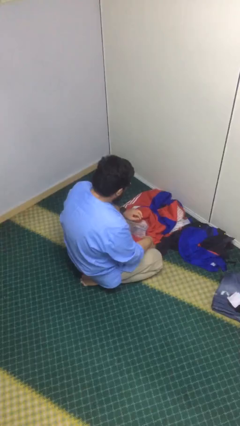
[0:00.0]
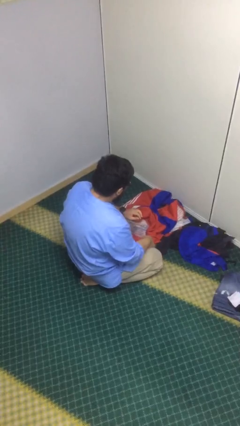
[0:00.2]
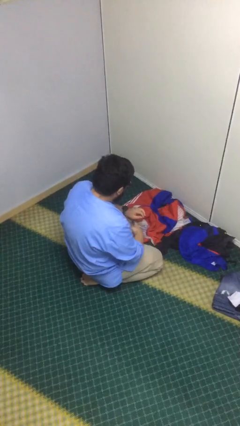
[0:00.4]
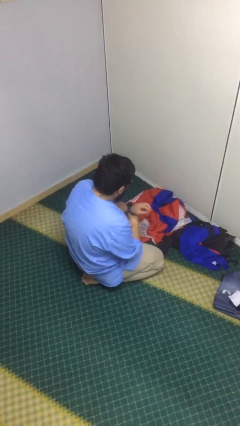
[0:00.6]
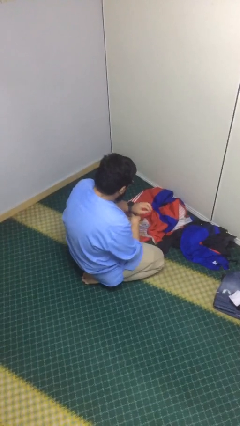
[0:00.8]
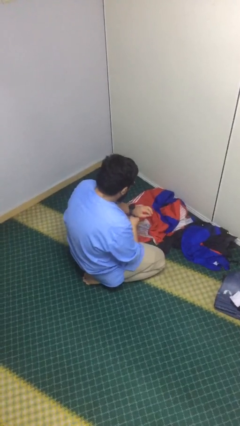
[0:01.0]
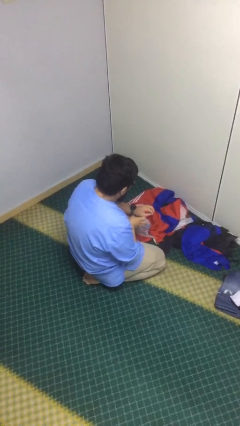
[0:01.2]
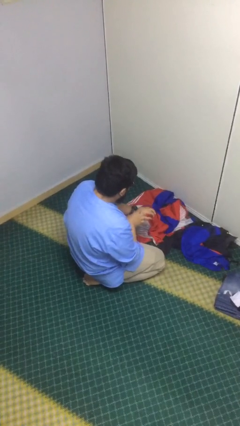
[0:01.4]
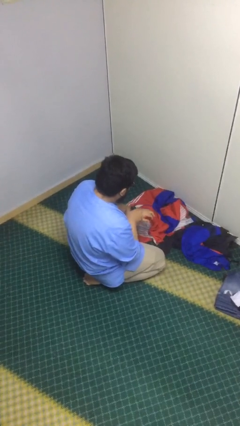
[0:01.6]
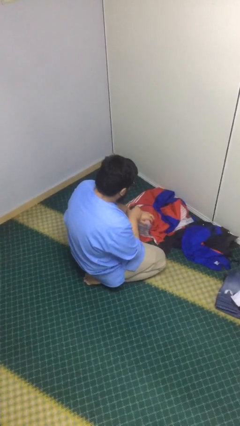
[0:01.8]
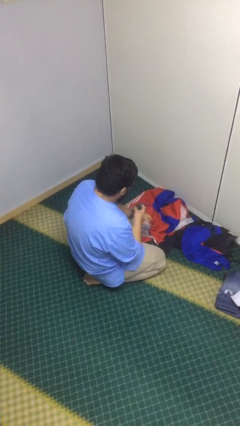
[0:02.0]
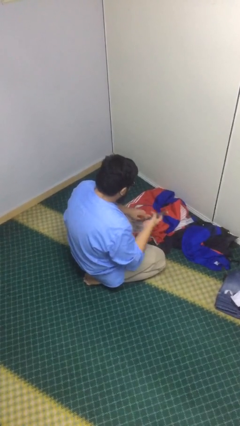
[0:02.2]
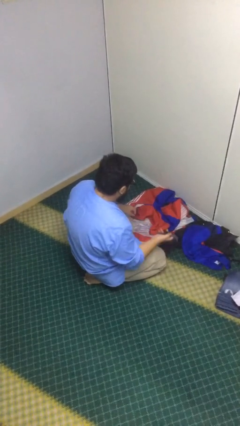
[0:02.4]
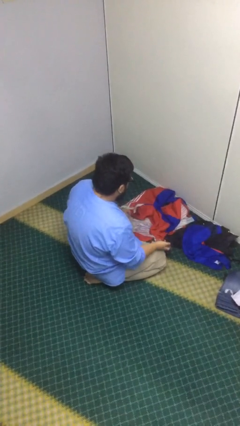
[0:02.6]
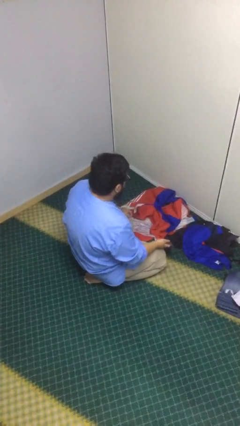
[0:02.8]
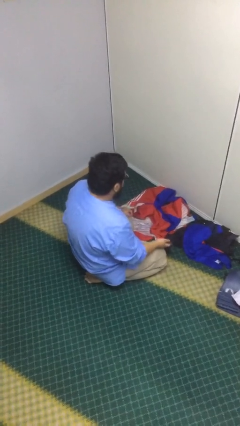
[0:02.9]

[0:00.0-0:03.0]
person takes off wristwatch

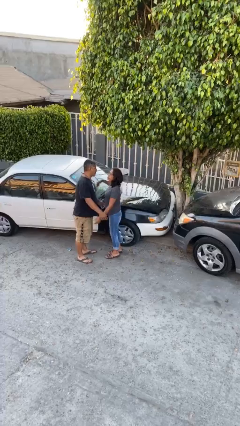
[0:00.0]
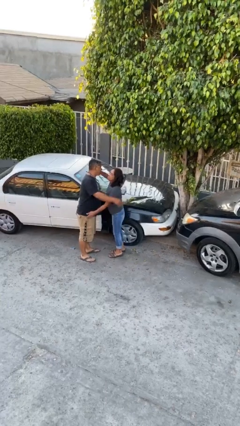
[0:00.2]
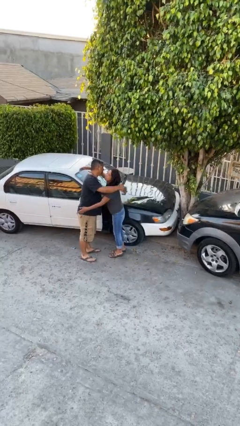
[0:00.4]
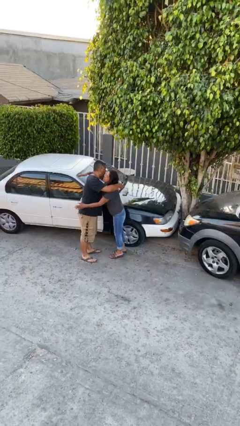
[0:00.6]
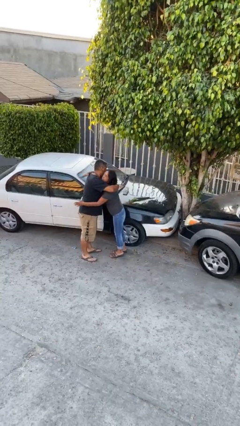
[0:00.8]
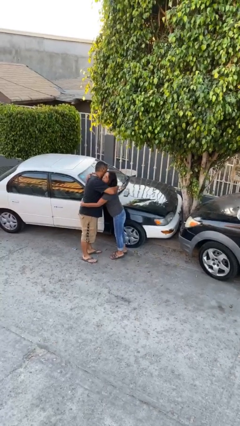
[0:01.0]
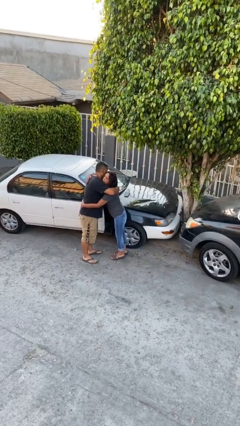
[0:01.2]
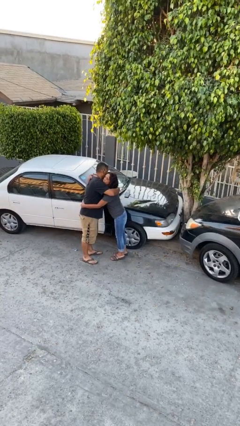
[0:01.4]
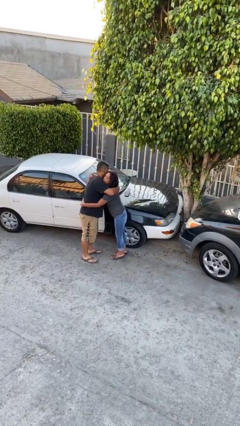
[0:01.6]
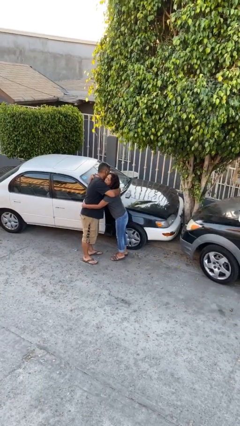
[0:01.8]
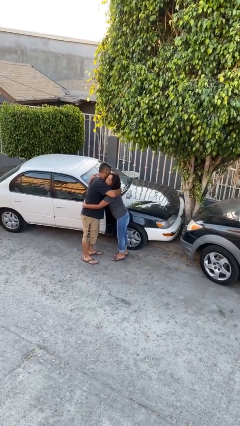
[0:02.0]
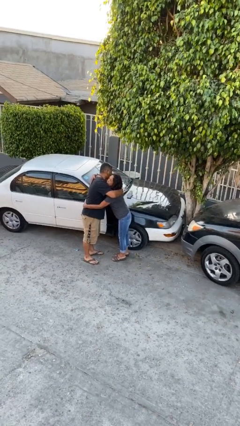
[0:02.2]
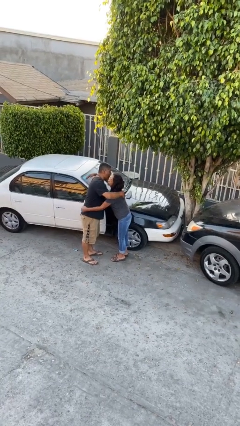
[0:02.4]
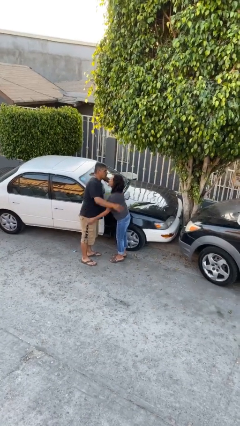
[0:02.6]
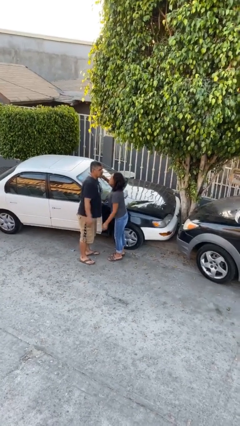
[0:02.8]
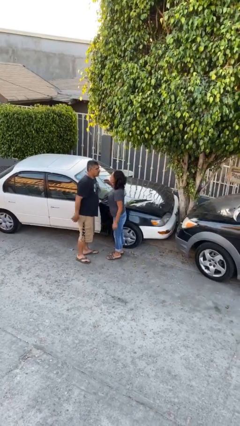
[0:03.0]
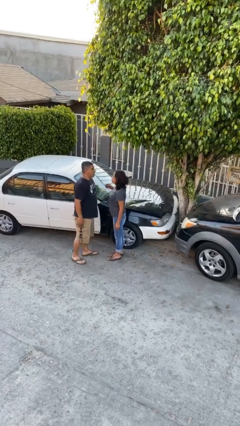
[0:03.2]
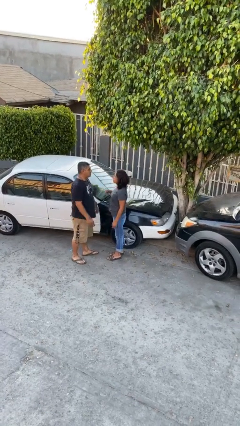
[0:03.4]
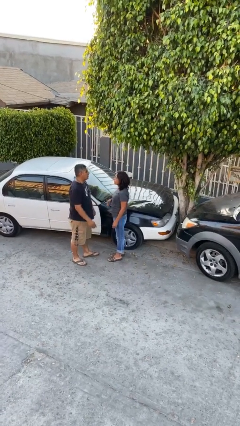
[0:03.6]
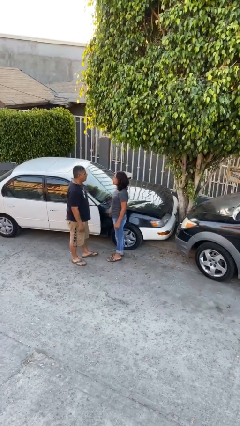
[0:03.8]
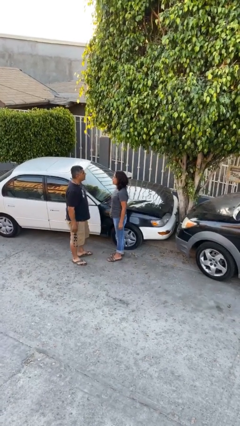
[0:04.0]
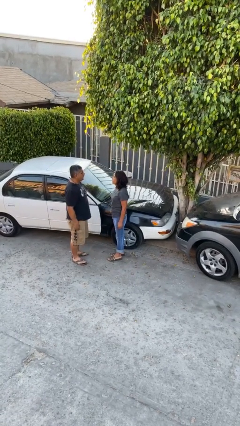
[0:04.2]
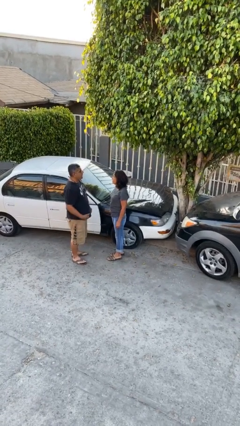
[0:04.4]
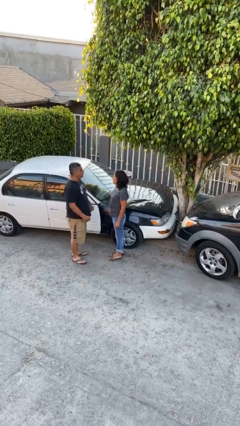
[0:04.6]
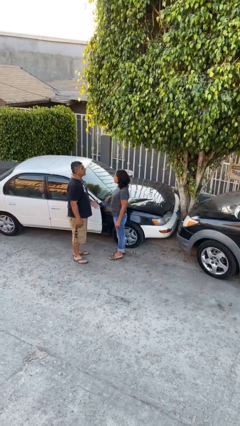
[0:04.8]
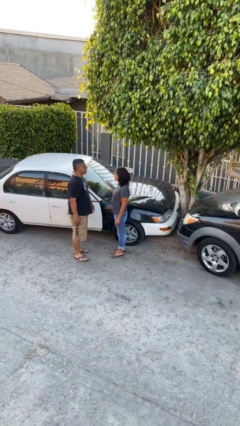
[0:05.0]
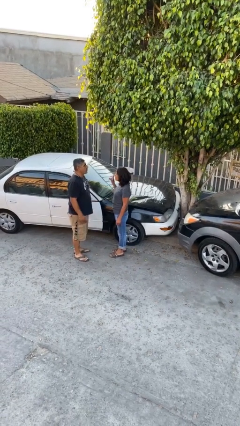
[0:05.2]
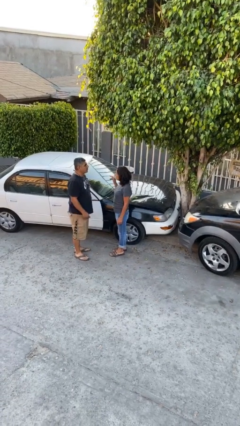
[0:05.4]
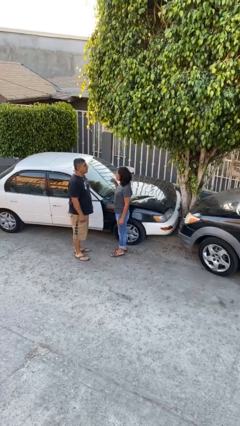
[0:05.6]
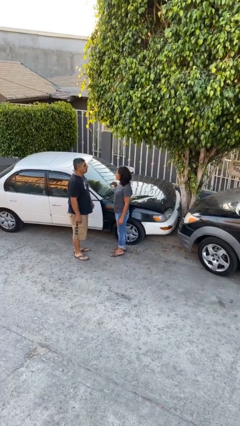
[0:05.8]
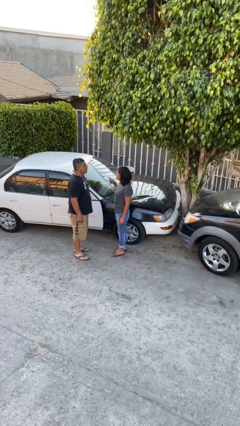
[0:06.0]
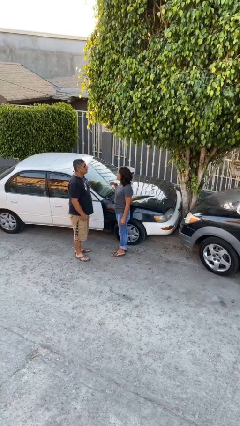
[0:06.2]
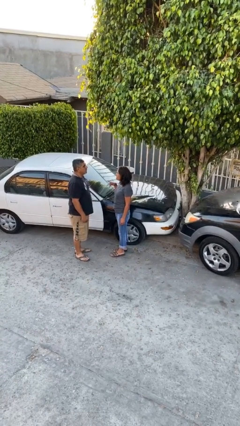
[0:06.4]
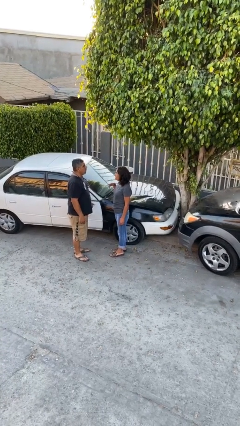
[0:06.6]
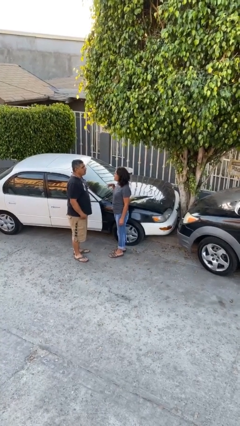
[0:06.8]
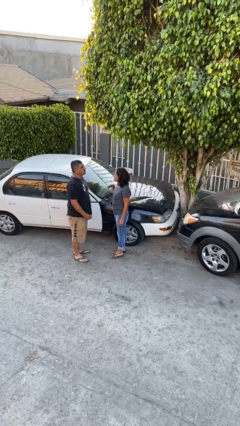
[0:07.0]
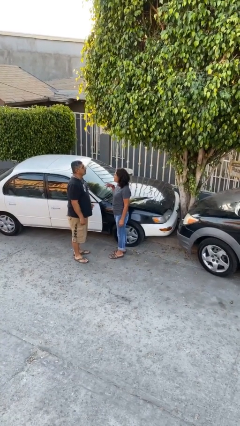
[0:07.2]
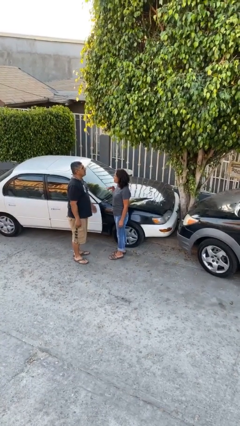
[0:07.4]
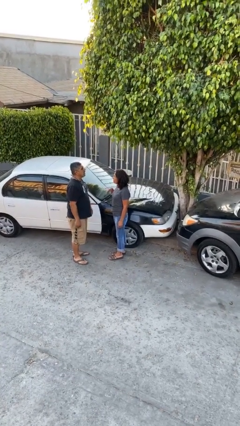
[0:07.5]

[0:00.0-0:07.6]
person embraces person

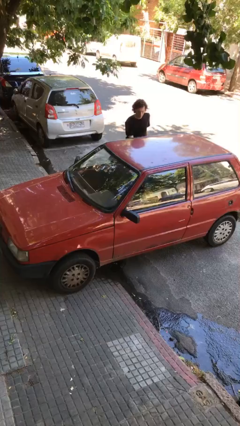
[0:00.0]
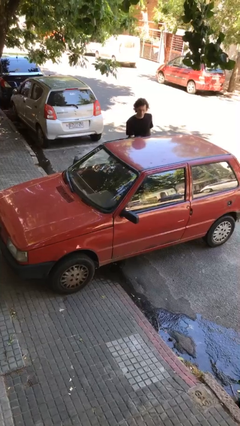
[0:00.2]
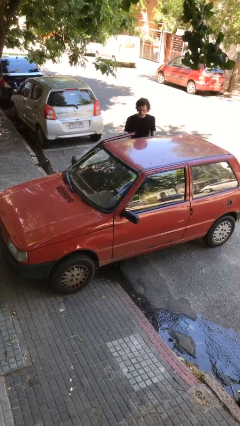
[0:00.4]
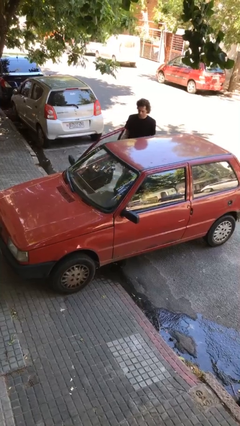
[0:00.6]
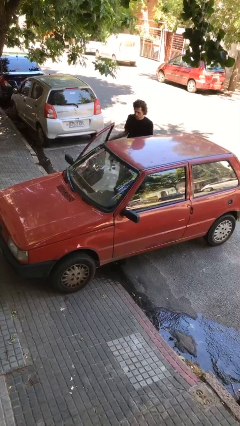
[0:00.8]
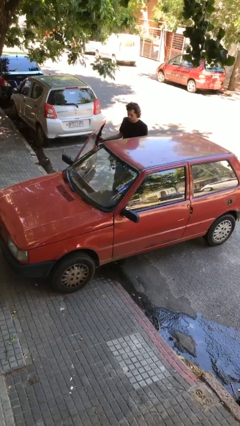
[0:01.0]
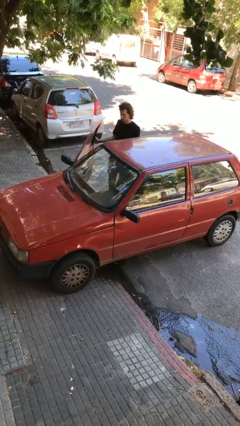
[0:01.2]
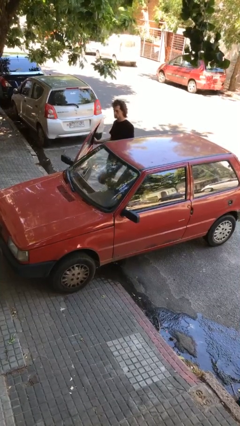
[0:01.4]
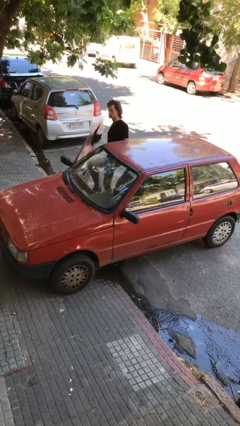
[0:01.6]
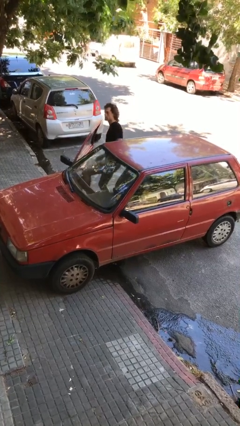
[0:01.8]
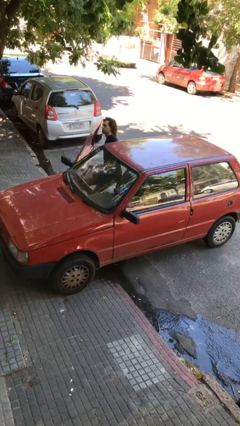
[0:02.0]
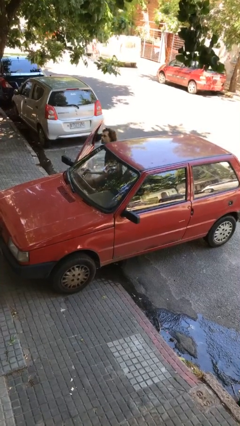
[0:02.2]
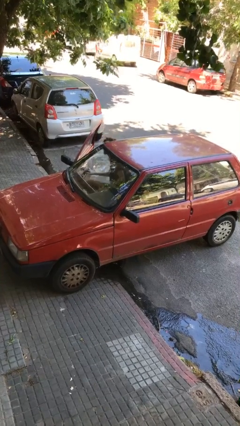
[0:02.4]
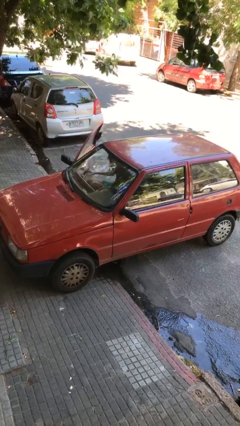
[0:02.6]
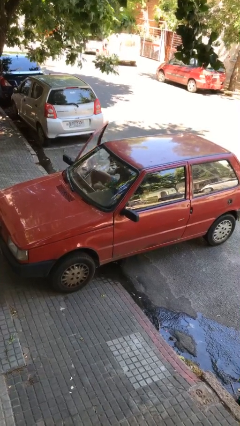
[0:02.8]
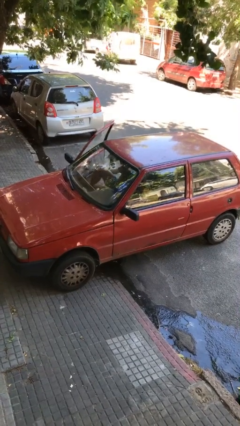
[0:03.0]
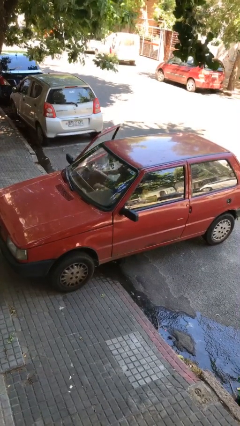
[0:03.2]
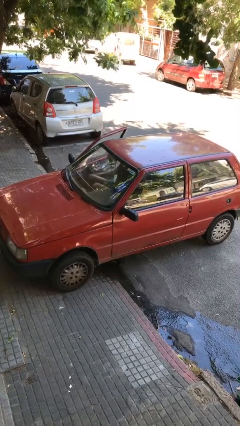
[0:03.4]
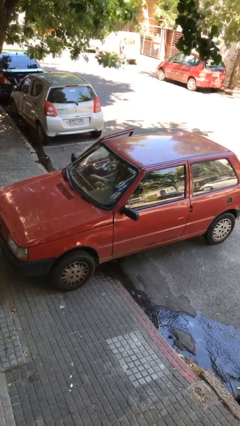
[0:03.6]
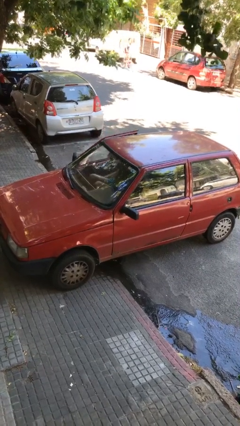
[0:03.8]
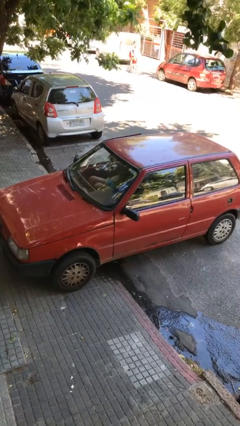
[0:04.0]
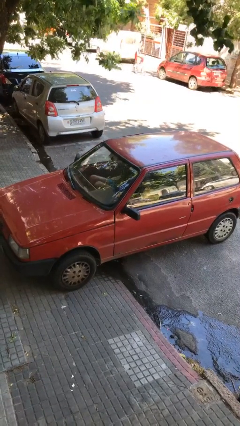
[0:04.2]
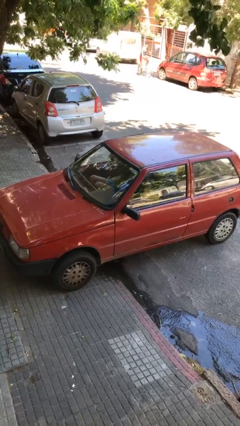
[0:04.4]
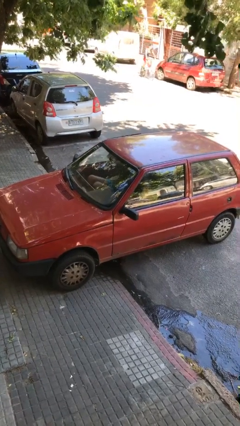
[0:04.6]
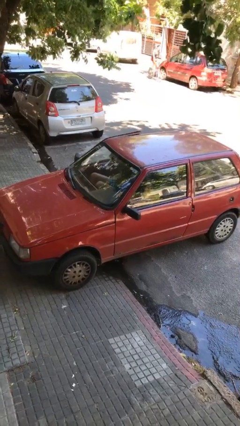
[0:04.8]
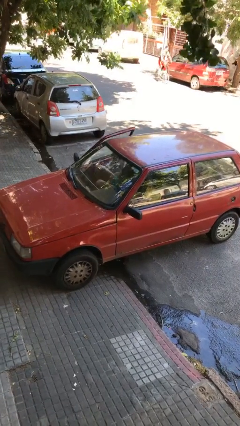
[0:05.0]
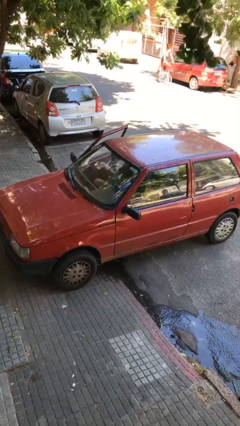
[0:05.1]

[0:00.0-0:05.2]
car picks up person

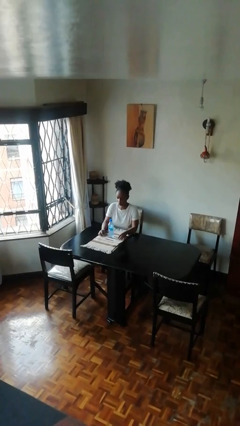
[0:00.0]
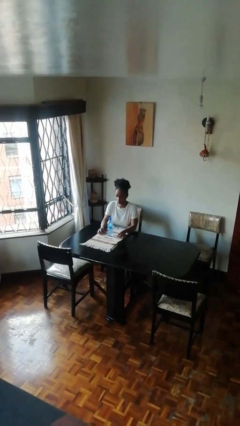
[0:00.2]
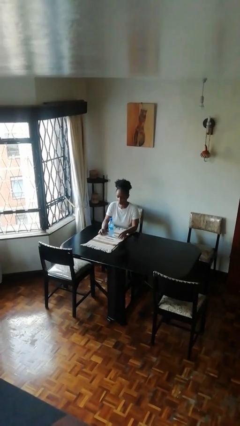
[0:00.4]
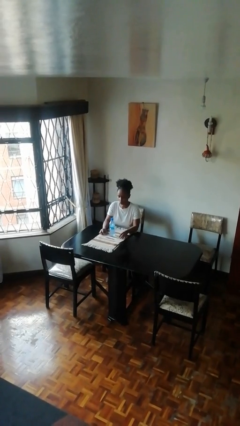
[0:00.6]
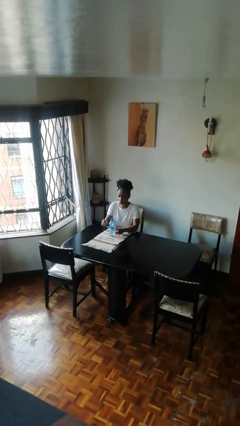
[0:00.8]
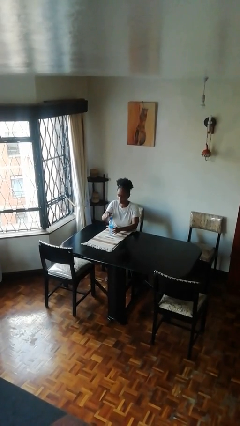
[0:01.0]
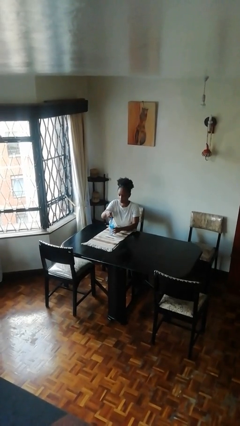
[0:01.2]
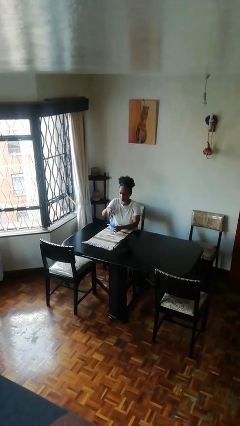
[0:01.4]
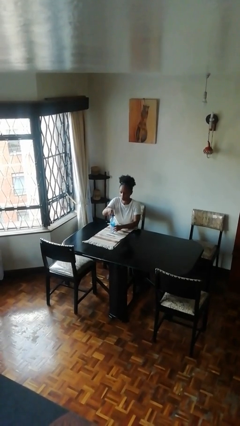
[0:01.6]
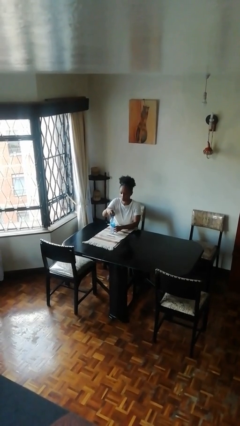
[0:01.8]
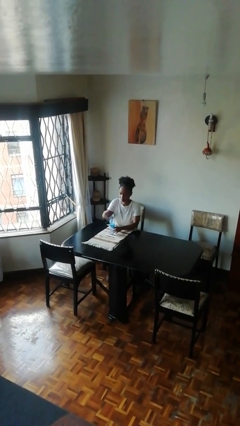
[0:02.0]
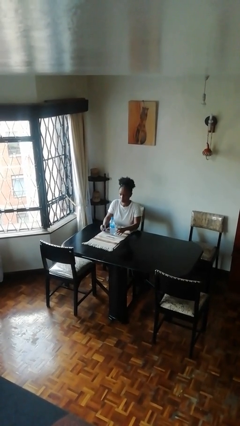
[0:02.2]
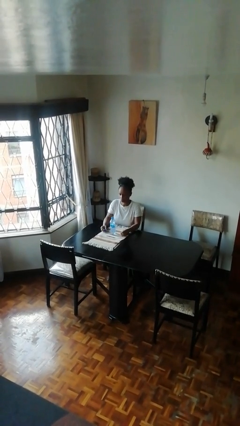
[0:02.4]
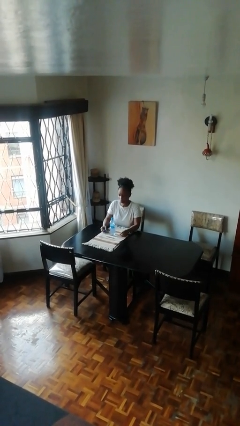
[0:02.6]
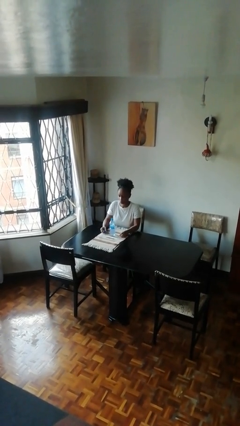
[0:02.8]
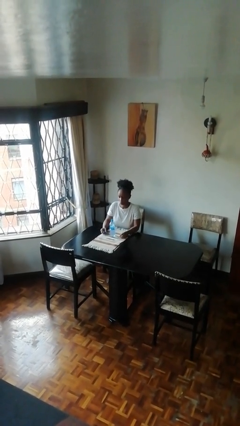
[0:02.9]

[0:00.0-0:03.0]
person unscrews lid from bottle
